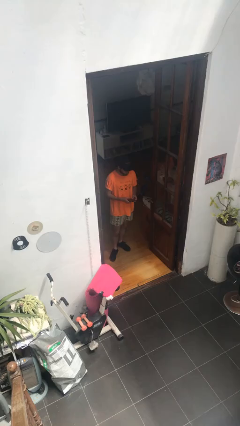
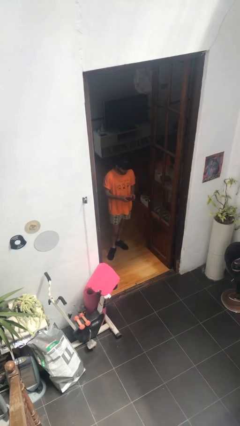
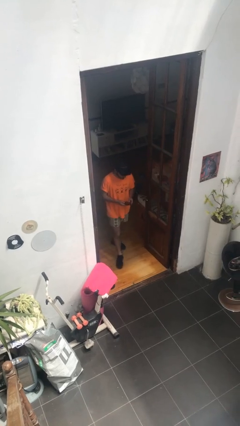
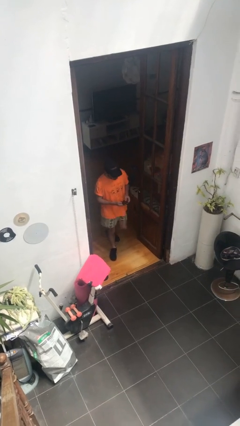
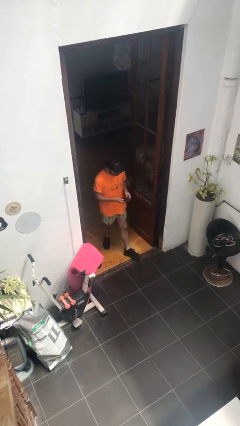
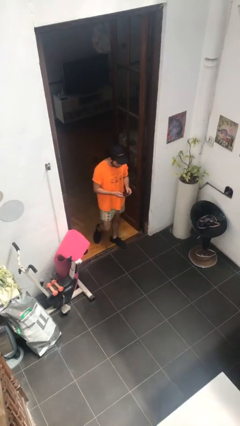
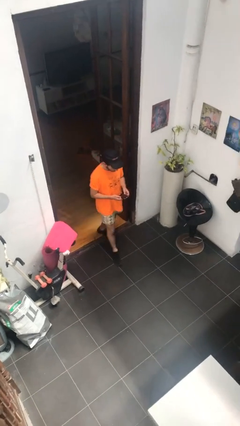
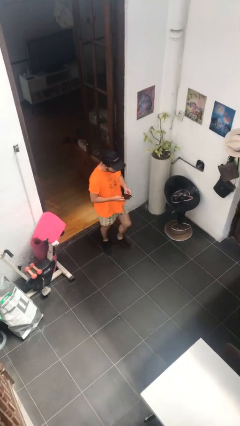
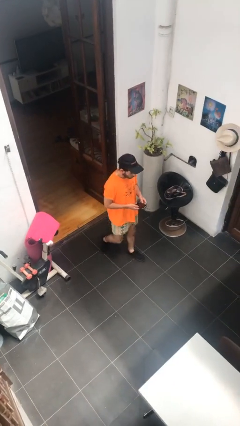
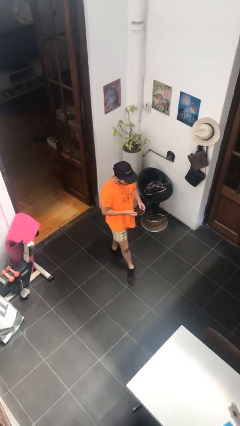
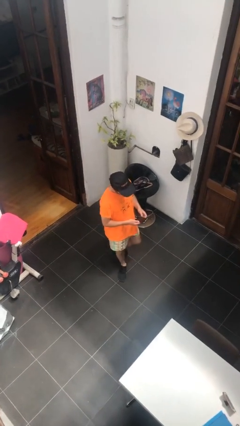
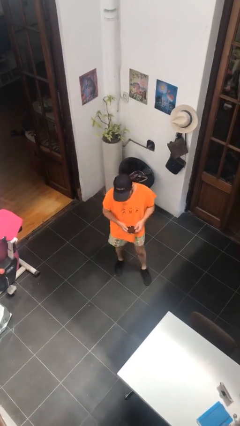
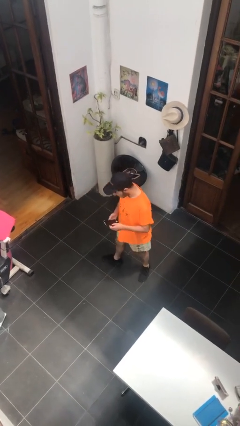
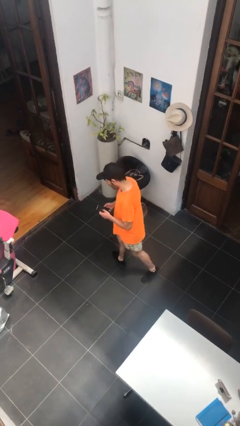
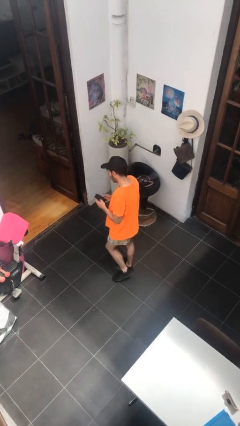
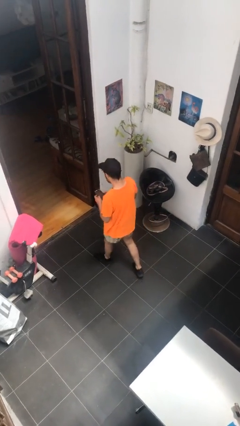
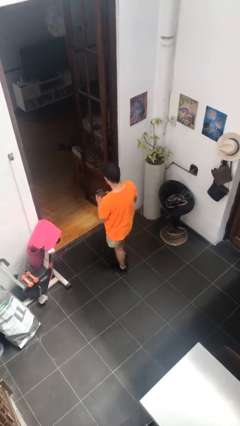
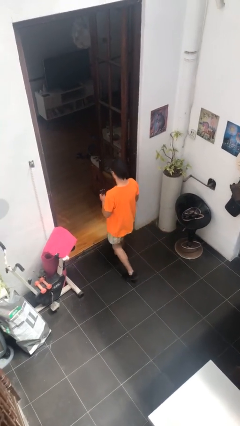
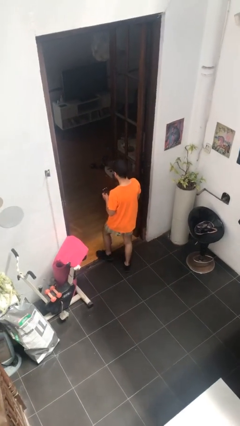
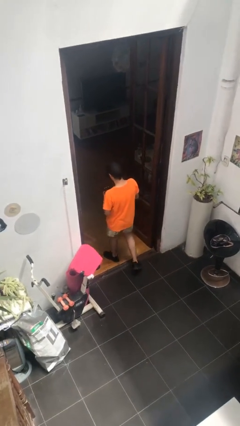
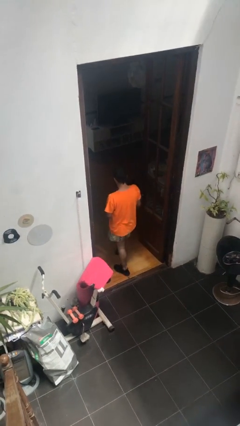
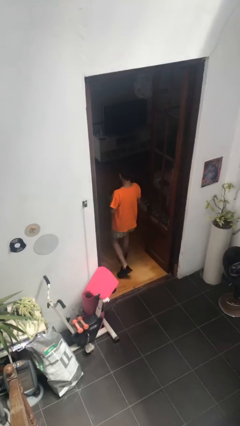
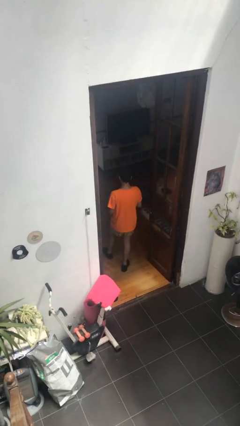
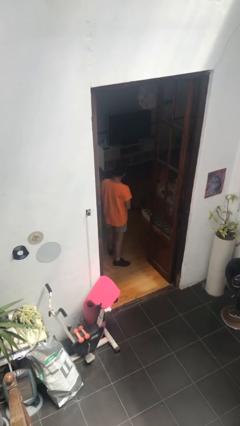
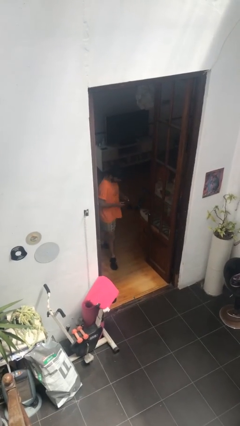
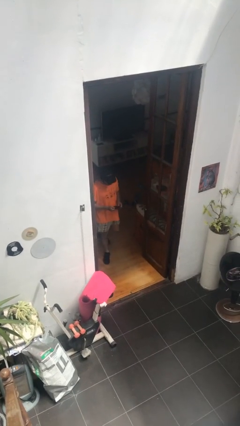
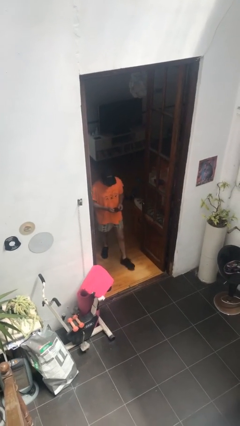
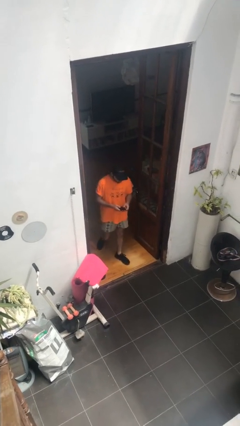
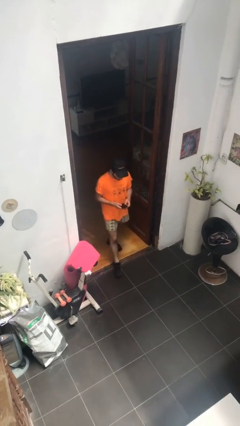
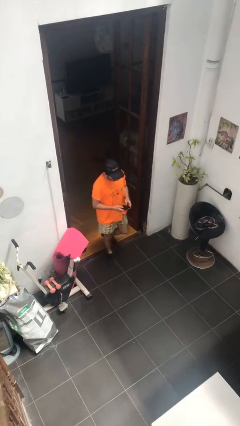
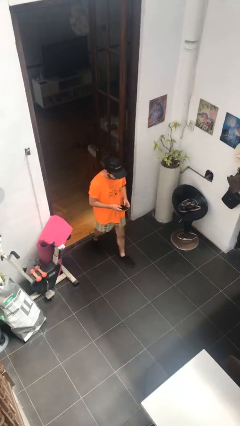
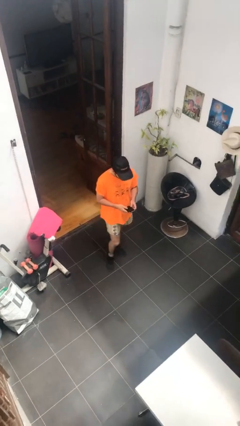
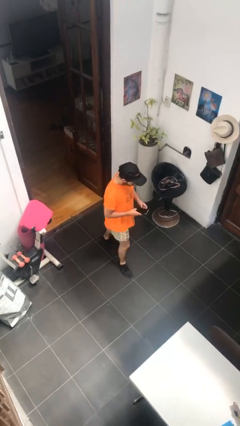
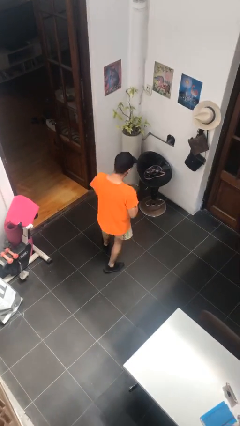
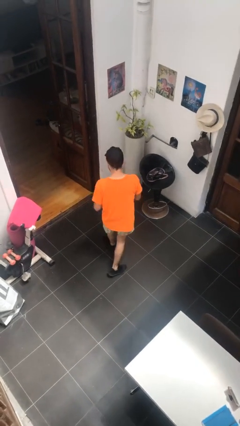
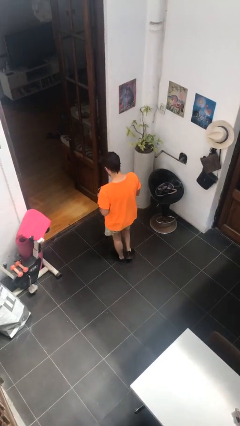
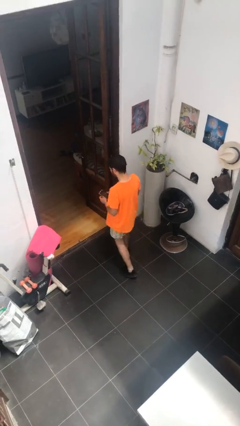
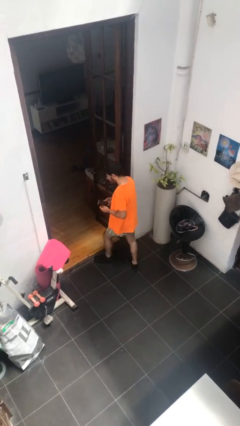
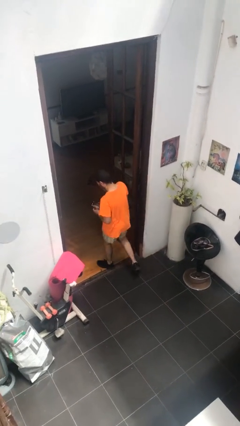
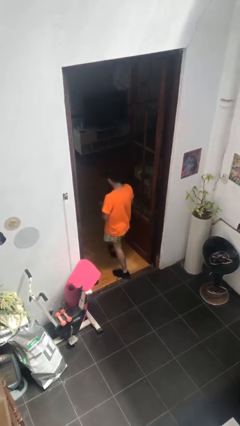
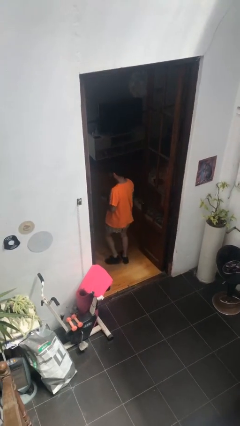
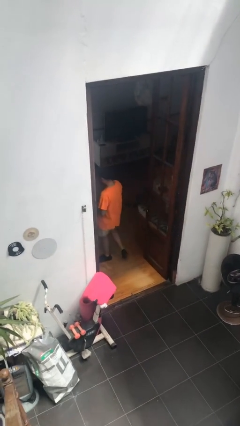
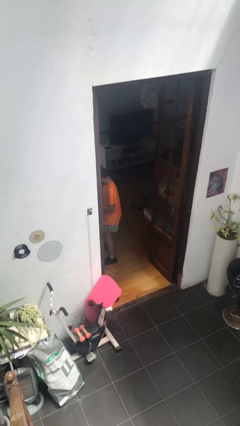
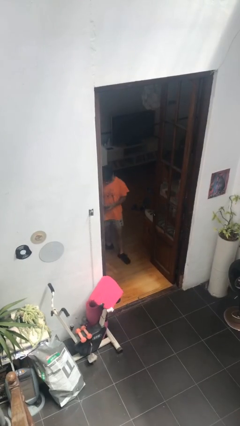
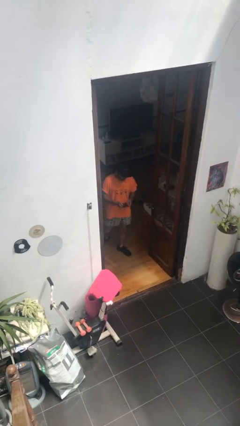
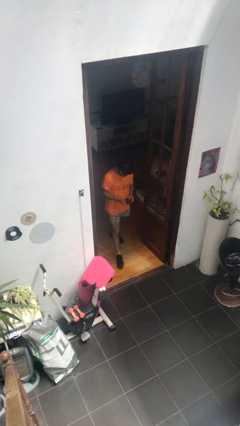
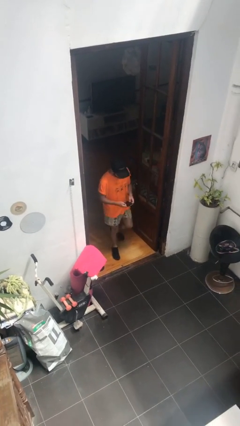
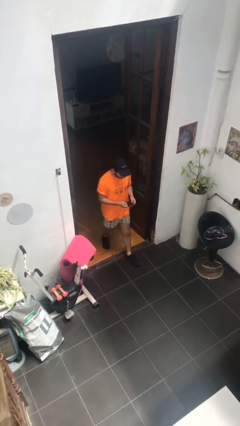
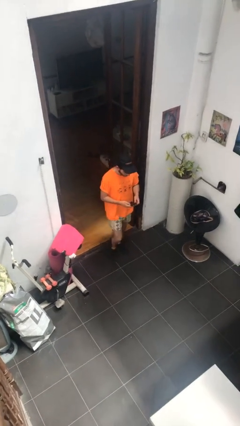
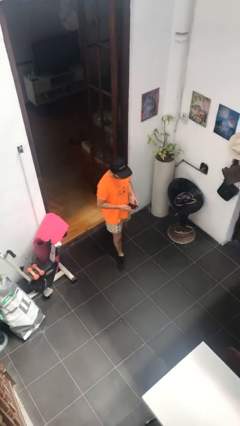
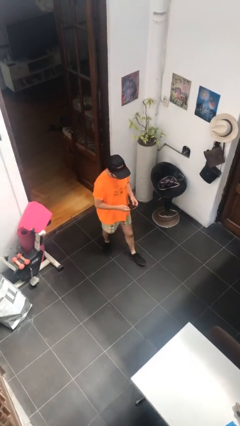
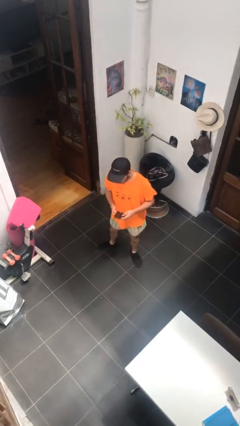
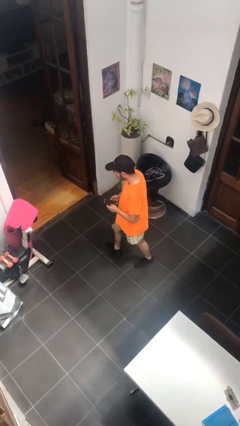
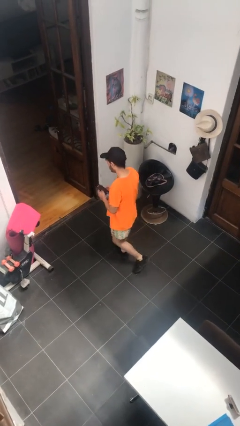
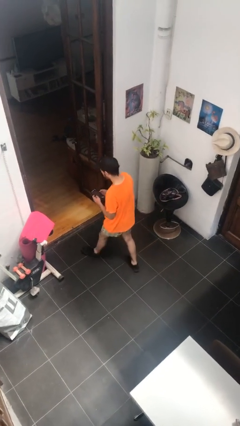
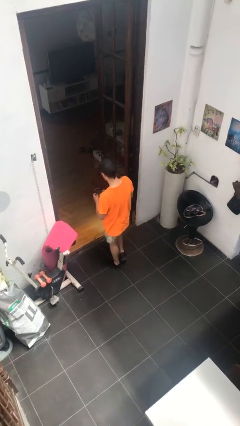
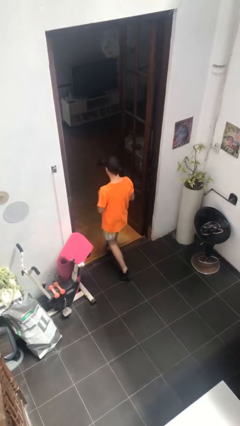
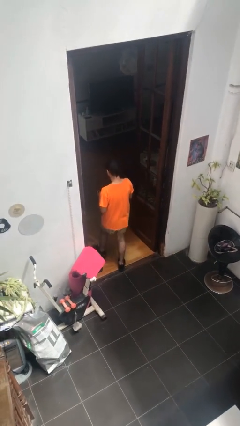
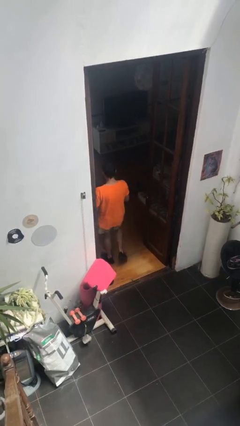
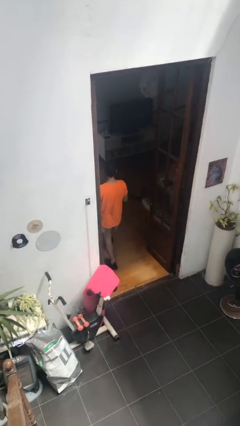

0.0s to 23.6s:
person texts on phone

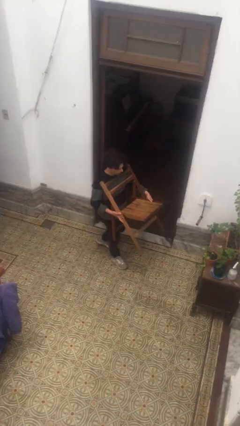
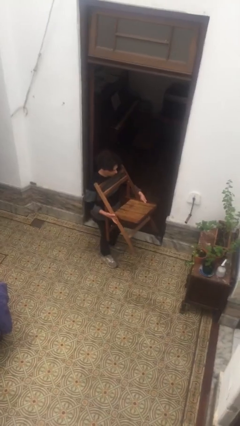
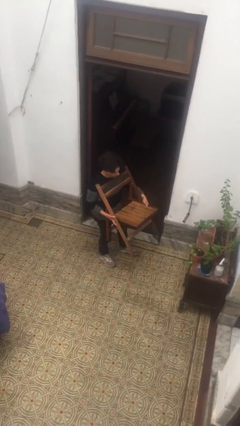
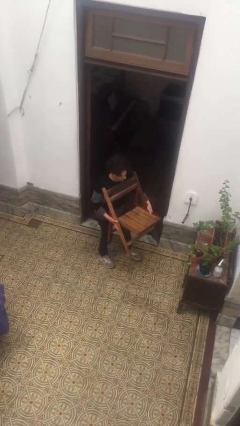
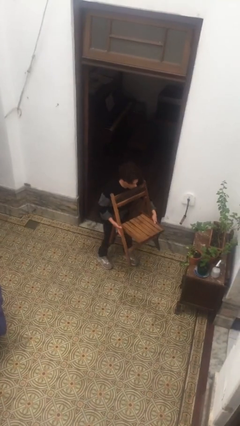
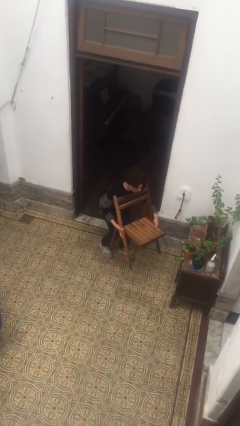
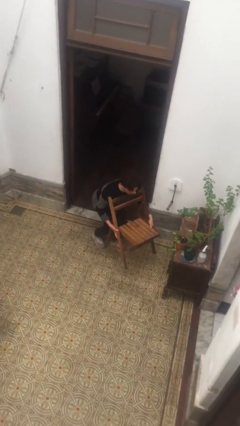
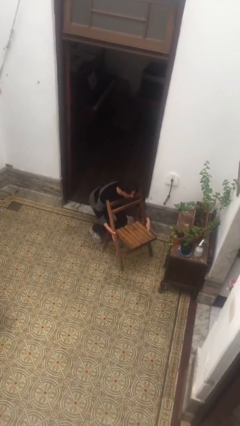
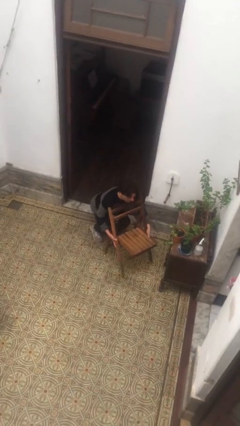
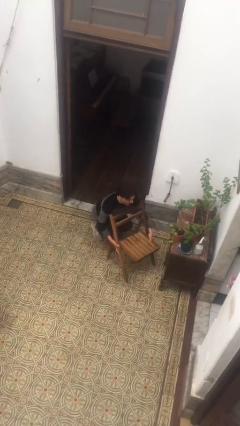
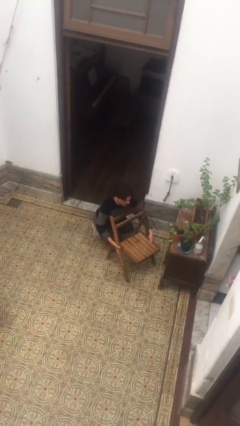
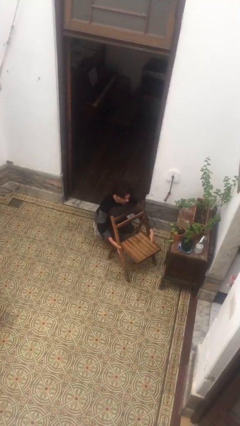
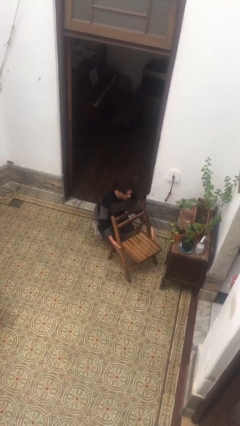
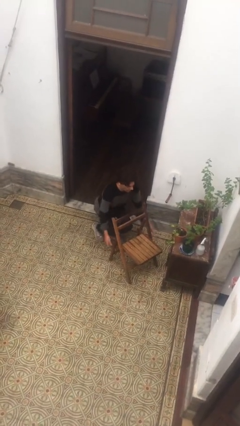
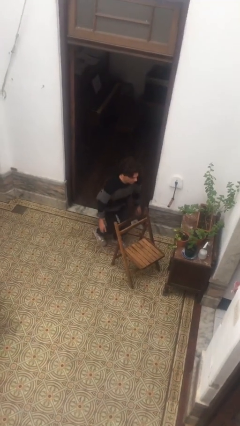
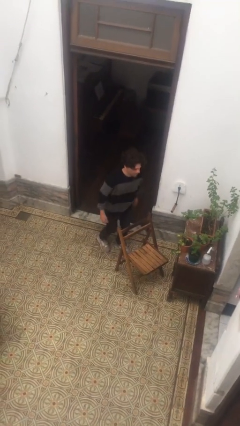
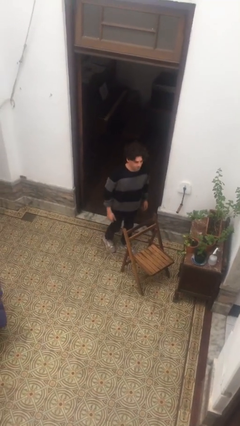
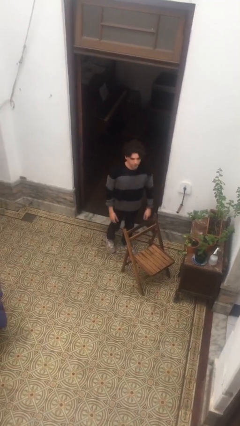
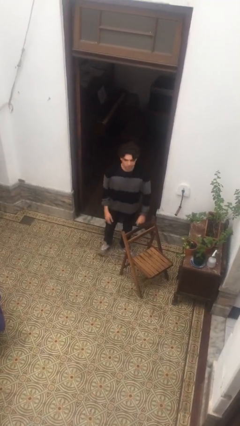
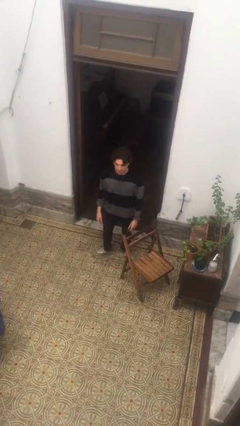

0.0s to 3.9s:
person puts down object on floor

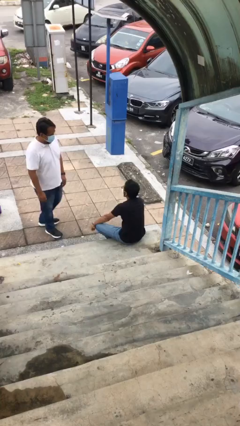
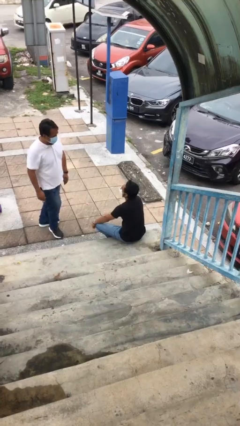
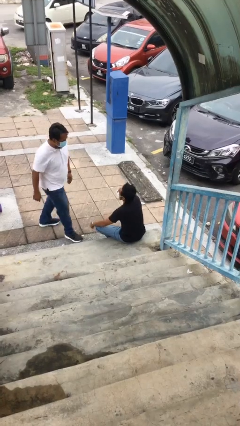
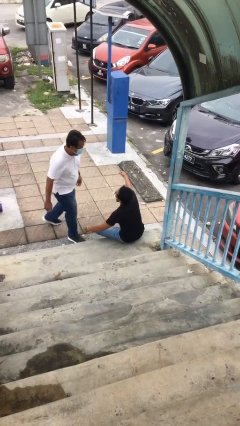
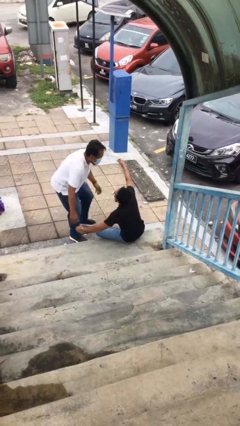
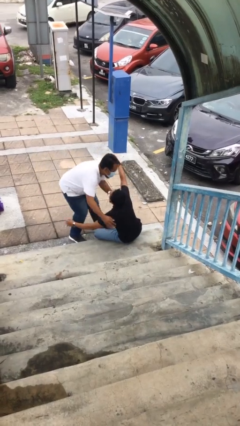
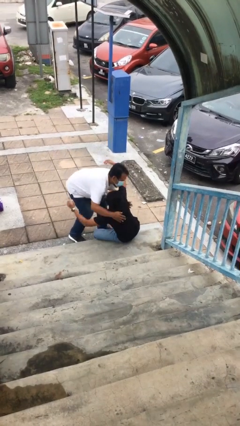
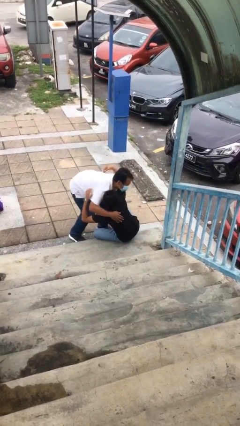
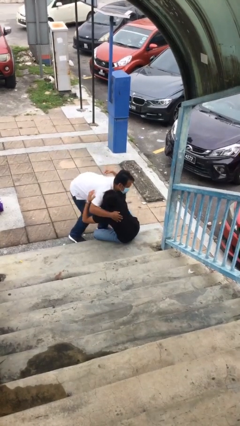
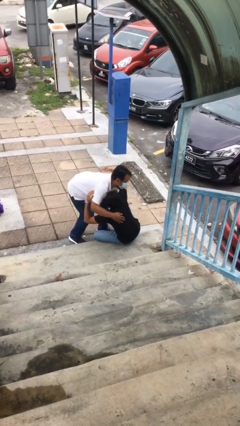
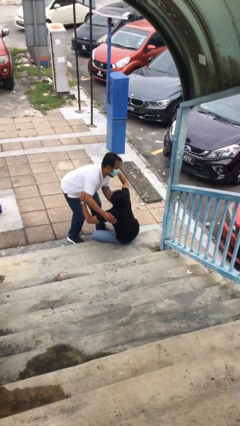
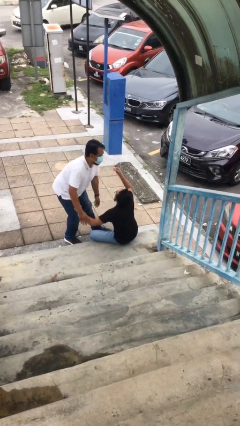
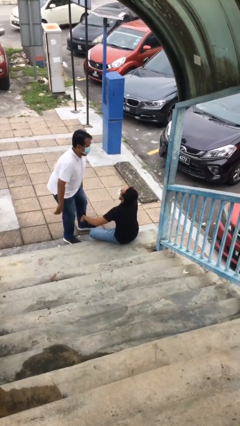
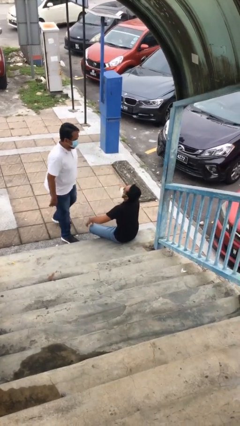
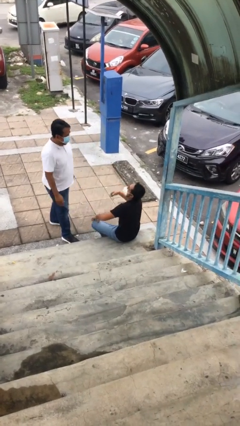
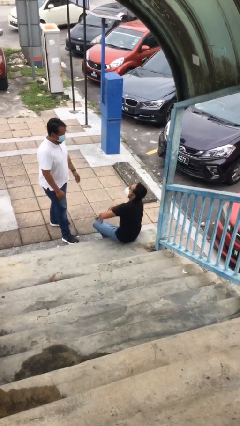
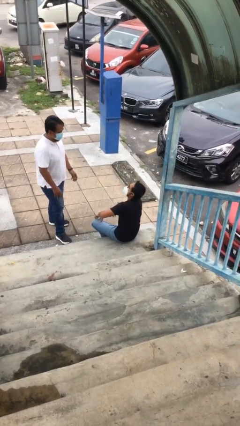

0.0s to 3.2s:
person embraces person
